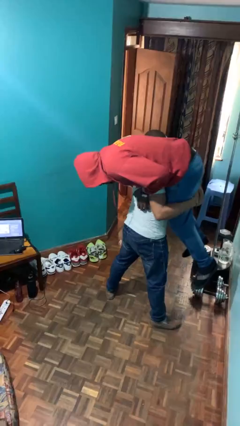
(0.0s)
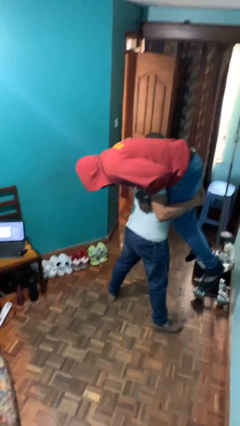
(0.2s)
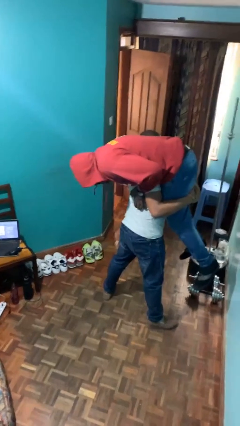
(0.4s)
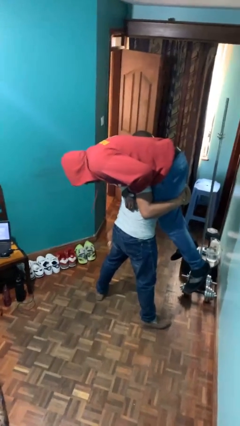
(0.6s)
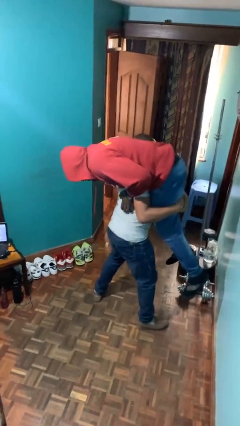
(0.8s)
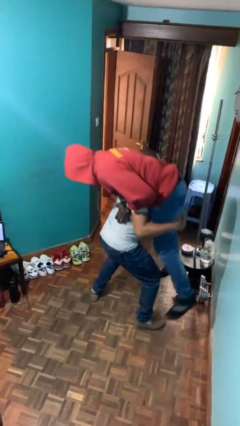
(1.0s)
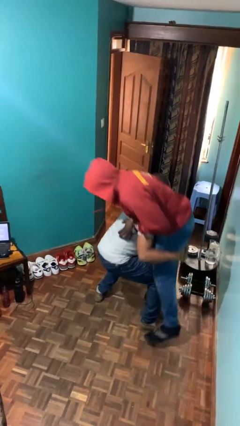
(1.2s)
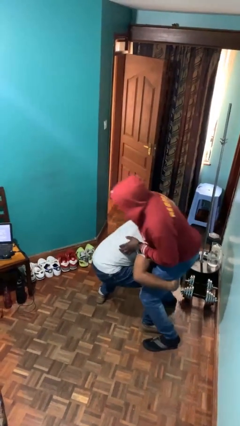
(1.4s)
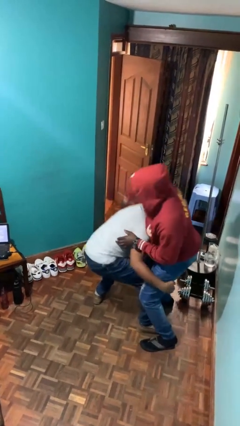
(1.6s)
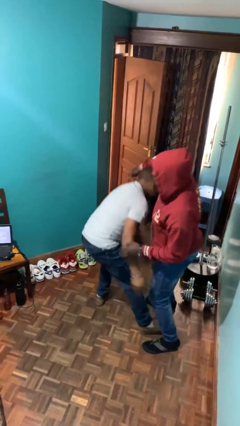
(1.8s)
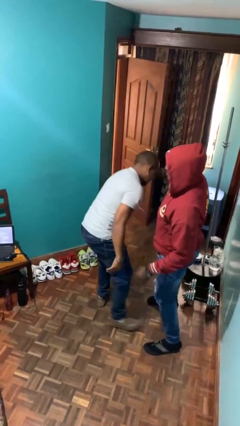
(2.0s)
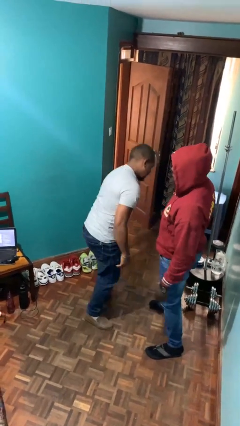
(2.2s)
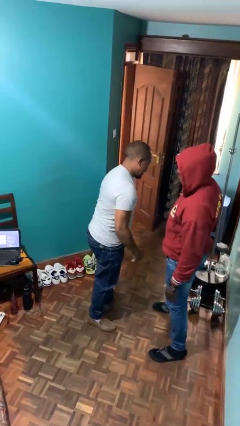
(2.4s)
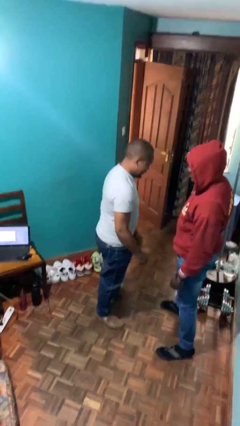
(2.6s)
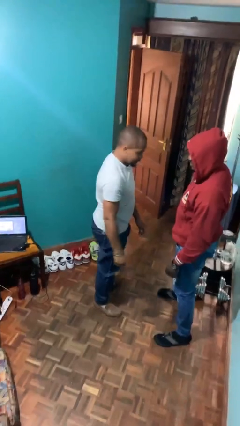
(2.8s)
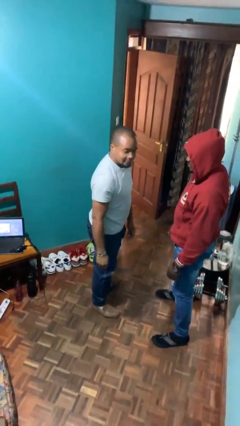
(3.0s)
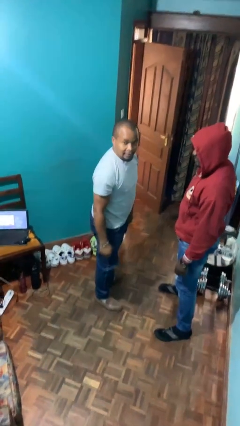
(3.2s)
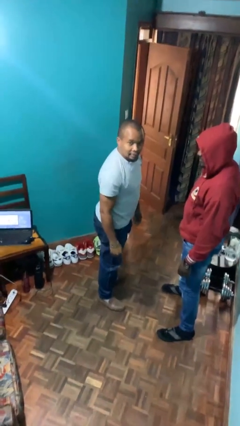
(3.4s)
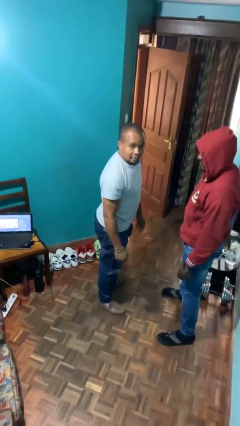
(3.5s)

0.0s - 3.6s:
person puts down person

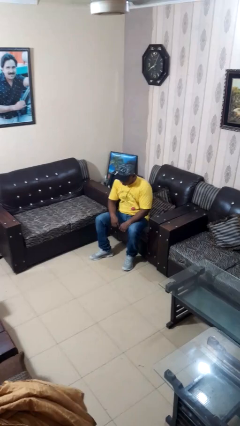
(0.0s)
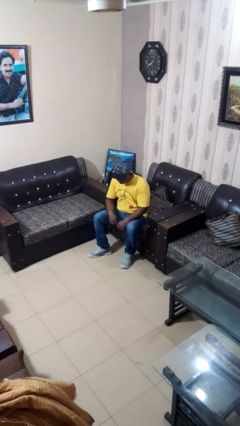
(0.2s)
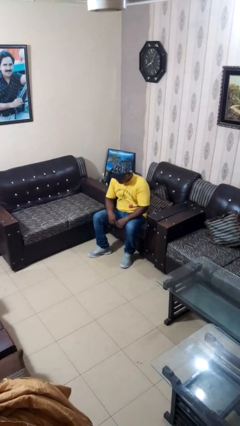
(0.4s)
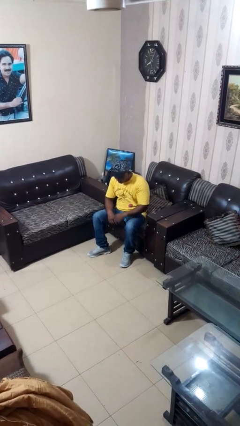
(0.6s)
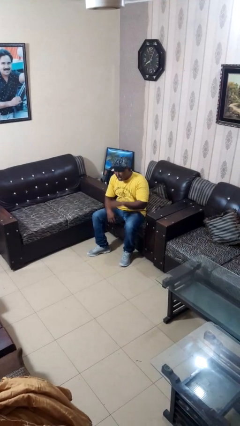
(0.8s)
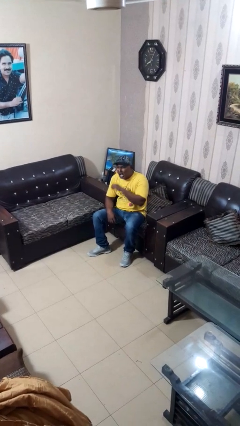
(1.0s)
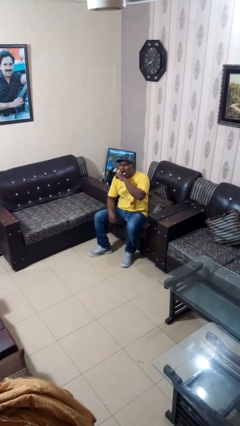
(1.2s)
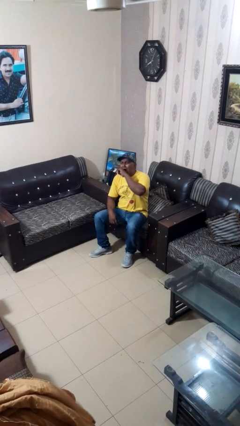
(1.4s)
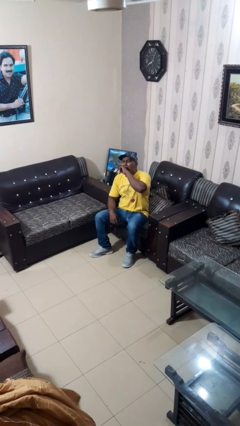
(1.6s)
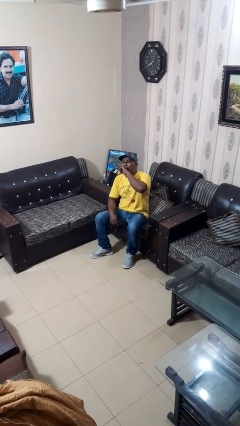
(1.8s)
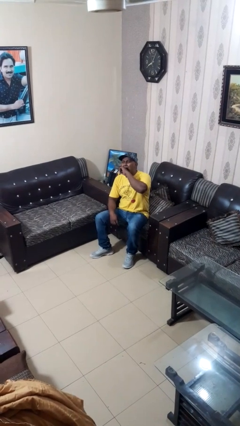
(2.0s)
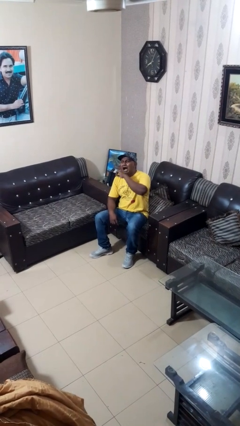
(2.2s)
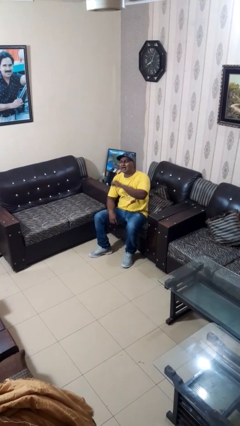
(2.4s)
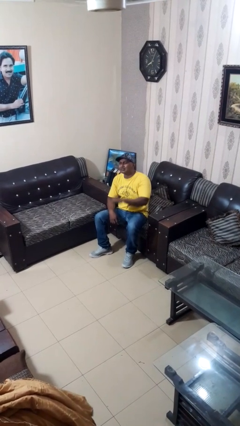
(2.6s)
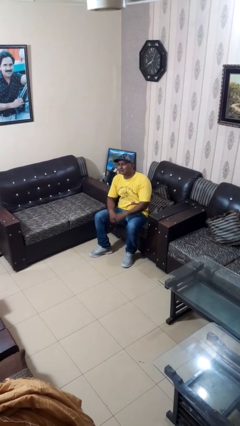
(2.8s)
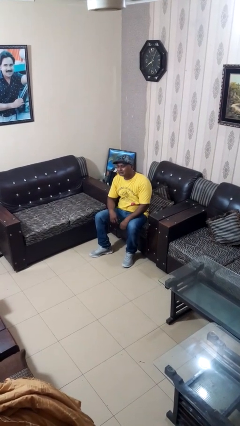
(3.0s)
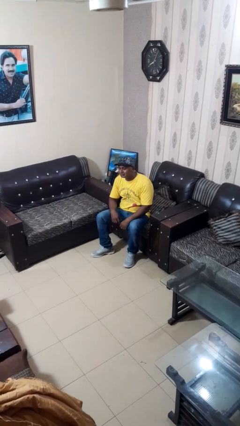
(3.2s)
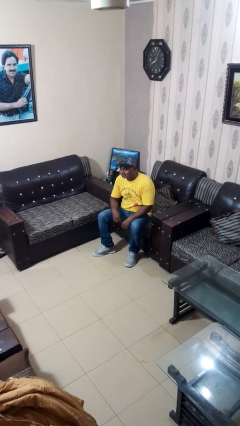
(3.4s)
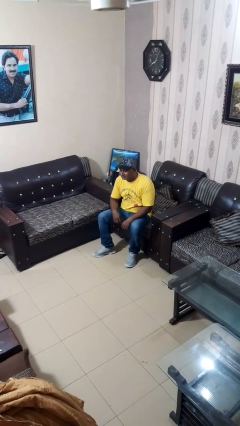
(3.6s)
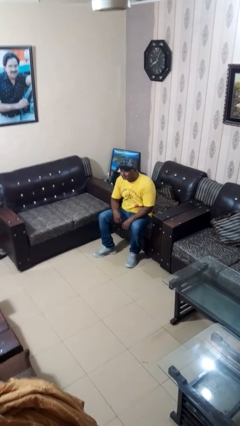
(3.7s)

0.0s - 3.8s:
person yawns

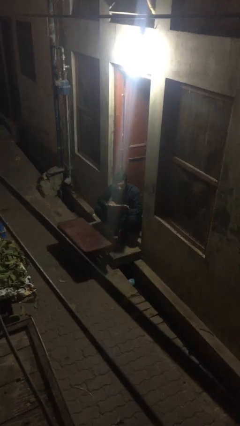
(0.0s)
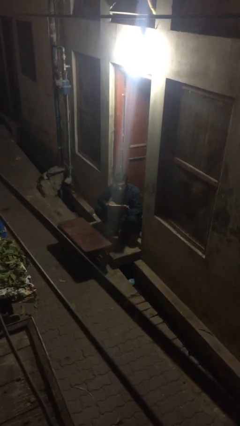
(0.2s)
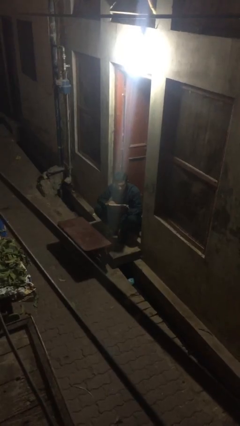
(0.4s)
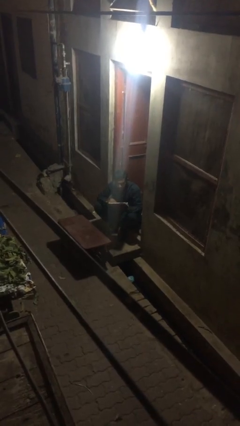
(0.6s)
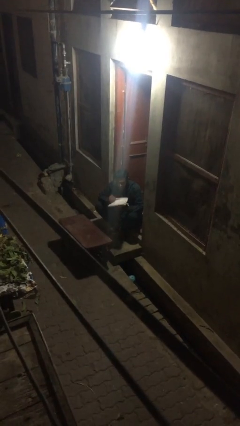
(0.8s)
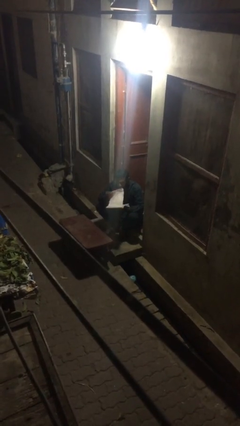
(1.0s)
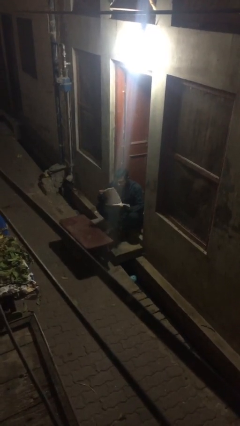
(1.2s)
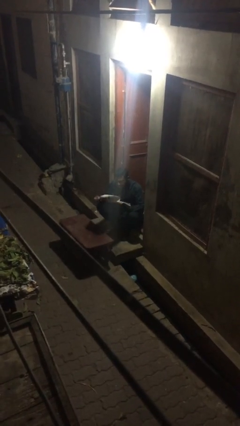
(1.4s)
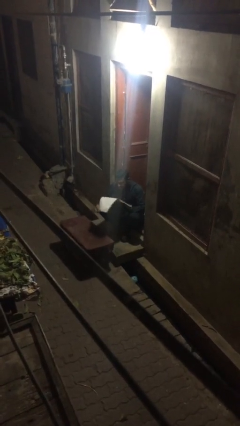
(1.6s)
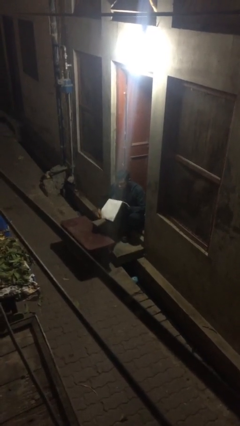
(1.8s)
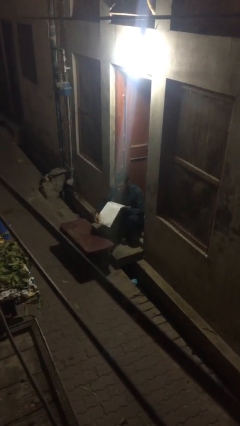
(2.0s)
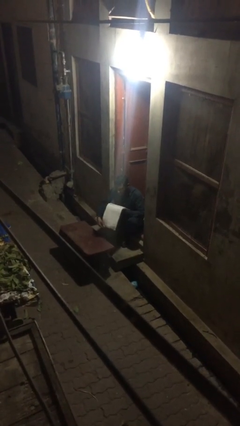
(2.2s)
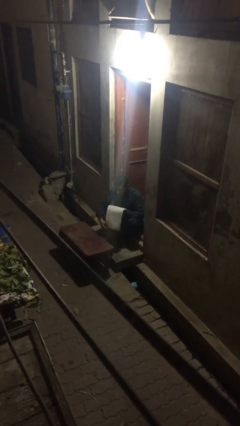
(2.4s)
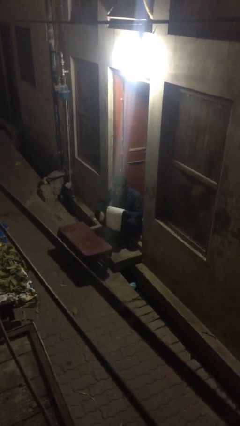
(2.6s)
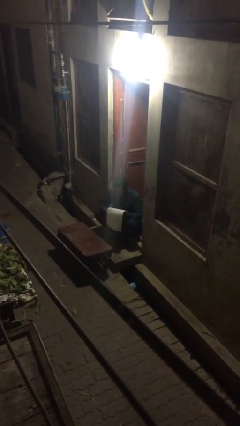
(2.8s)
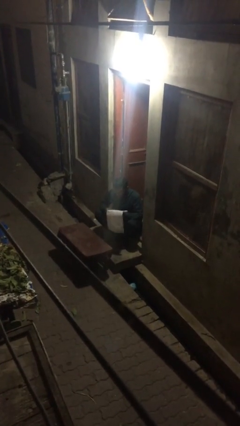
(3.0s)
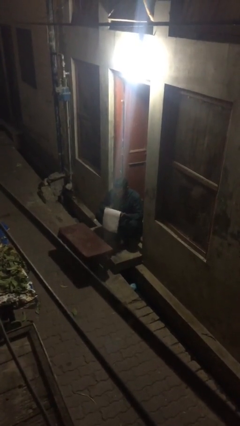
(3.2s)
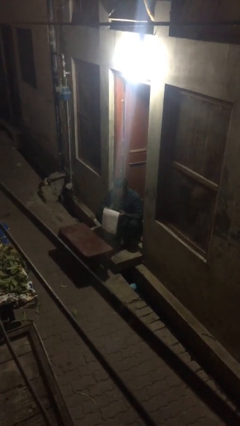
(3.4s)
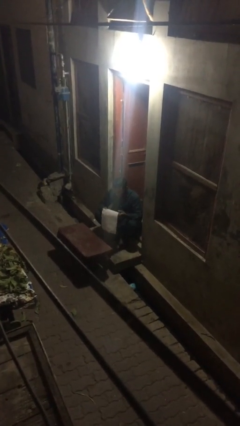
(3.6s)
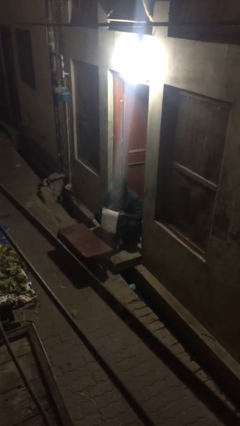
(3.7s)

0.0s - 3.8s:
person reads document

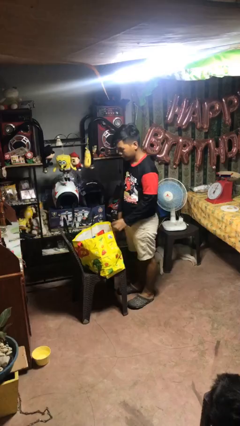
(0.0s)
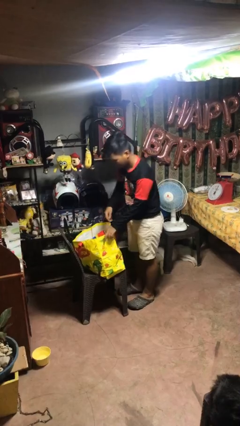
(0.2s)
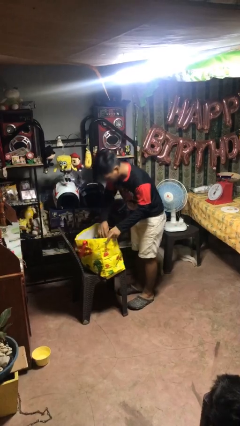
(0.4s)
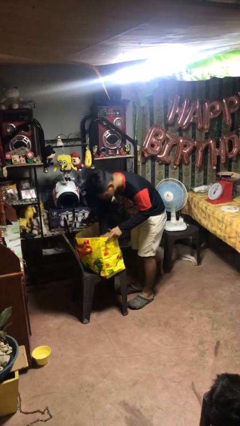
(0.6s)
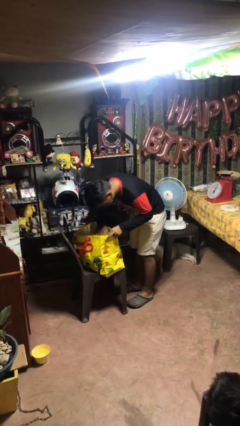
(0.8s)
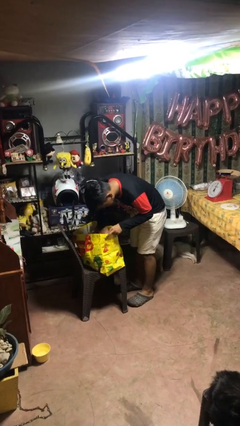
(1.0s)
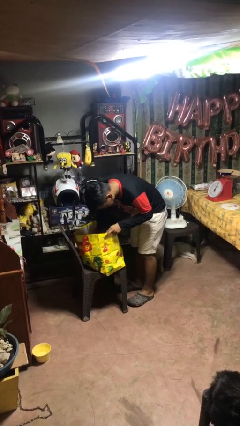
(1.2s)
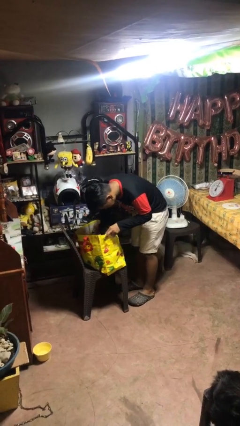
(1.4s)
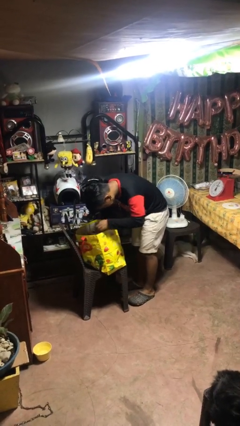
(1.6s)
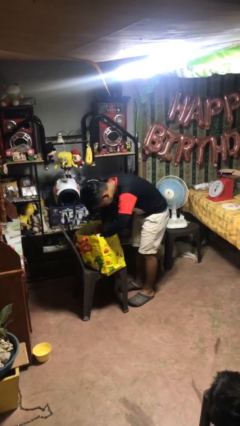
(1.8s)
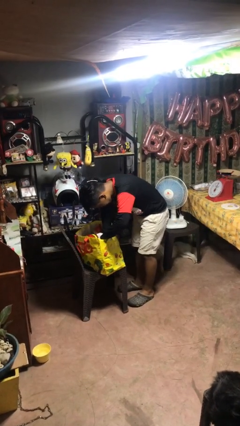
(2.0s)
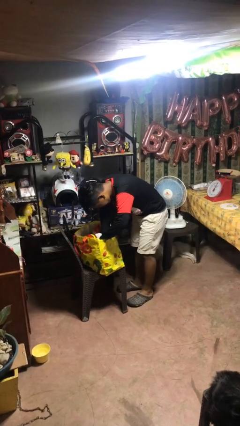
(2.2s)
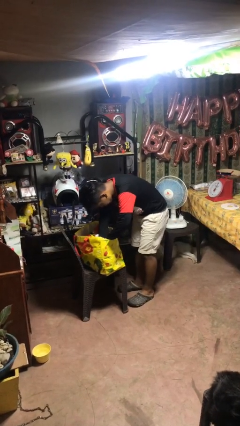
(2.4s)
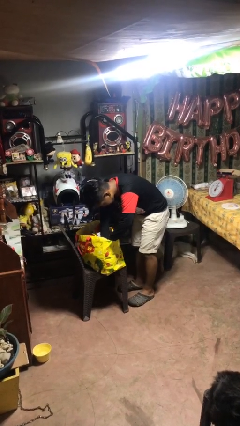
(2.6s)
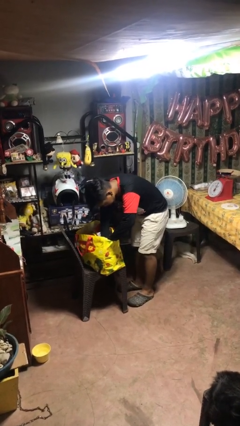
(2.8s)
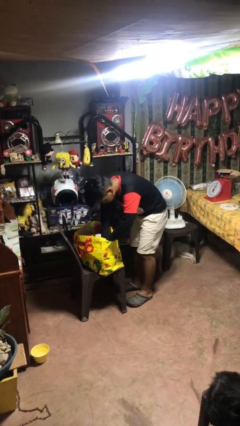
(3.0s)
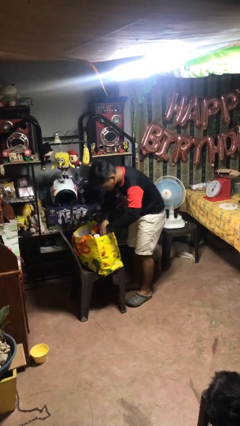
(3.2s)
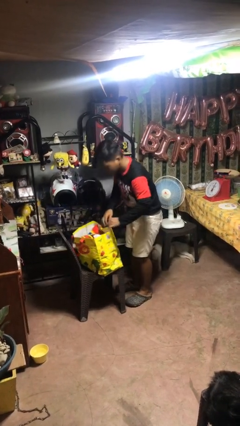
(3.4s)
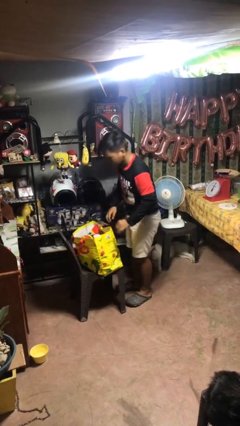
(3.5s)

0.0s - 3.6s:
person searches in bag

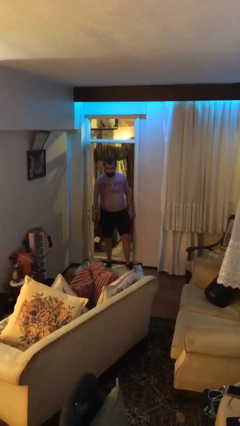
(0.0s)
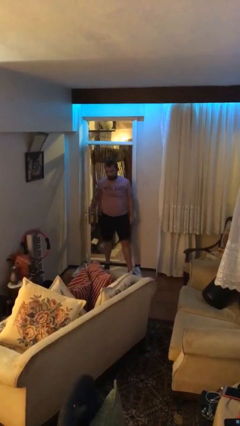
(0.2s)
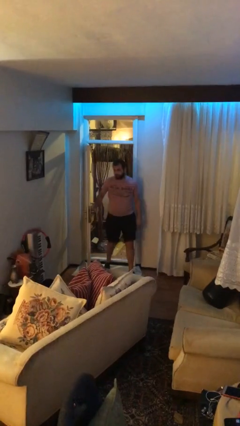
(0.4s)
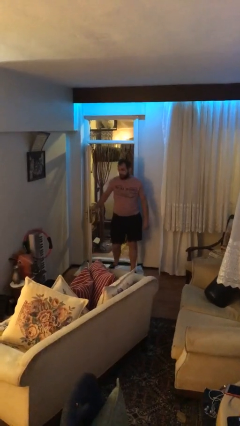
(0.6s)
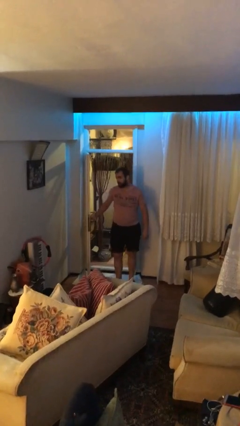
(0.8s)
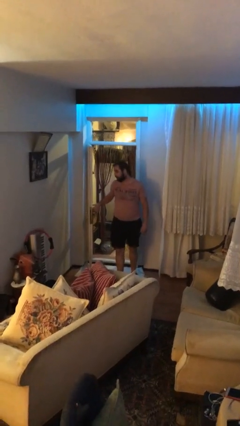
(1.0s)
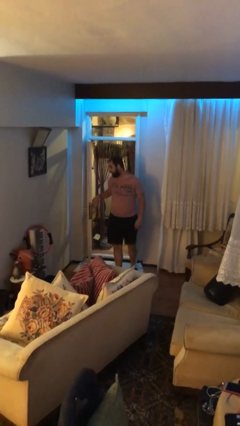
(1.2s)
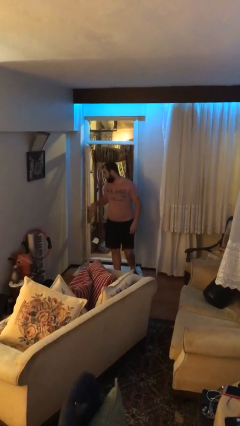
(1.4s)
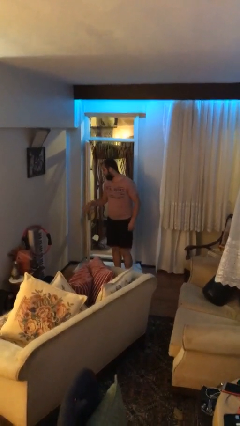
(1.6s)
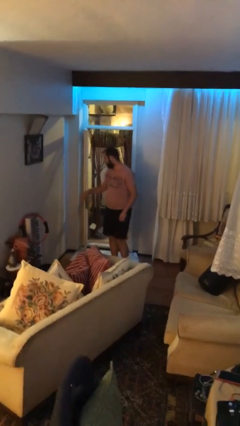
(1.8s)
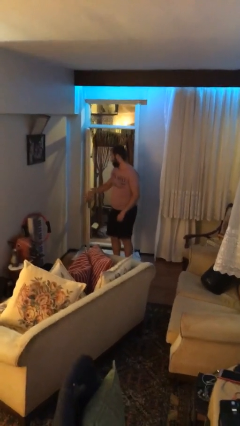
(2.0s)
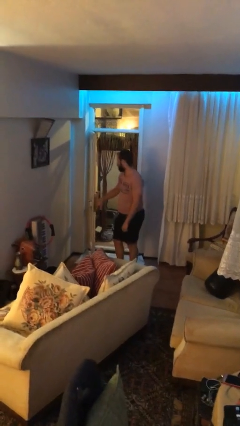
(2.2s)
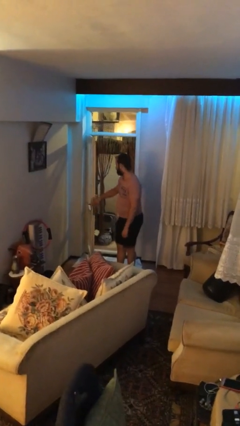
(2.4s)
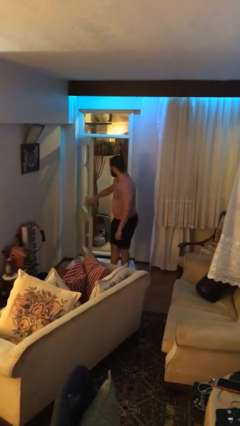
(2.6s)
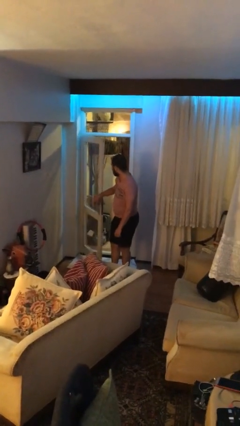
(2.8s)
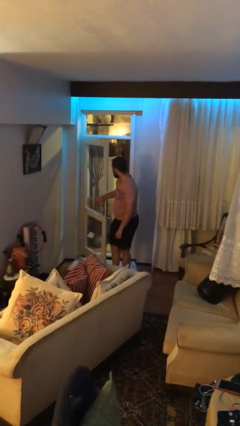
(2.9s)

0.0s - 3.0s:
person enters scene through structure

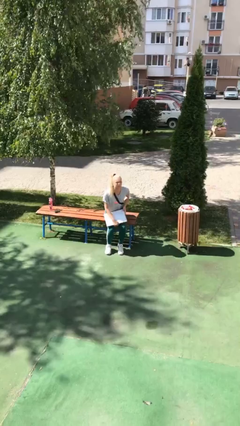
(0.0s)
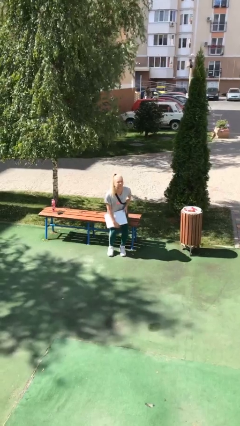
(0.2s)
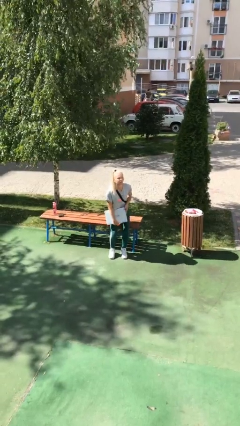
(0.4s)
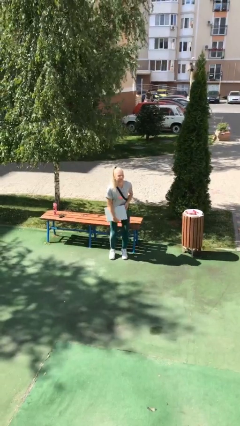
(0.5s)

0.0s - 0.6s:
person stands up
